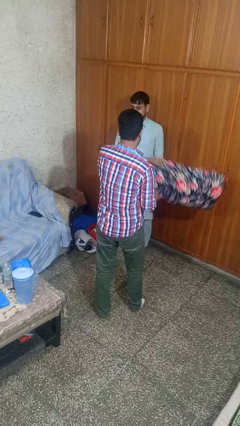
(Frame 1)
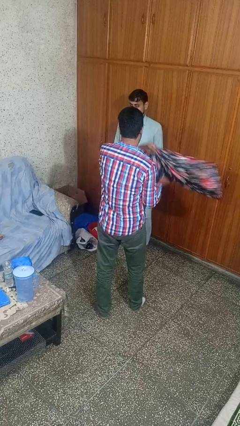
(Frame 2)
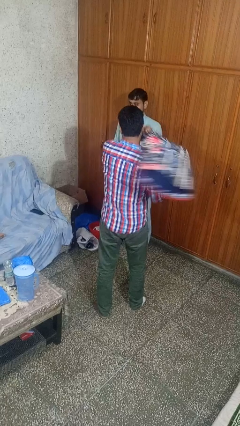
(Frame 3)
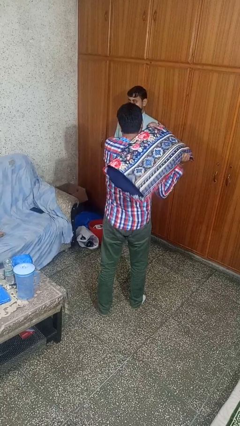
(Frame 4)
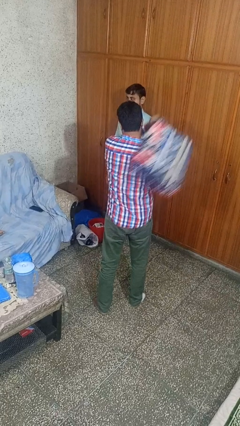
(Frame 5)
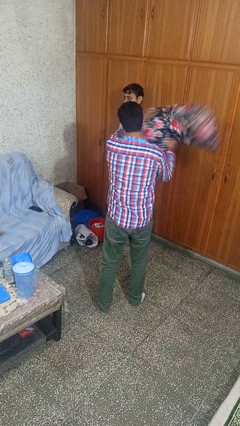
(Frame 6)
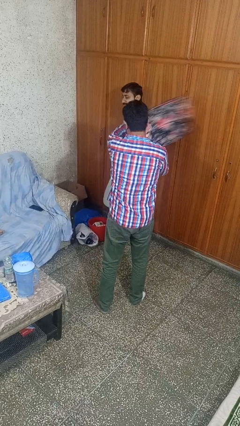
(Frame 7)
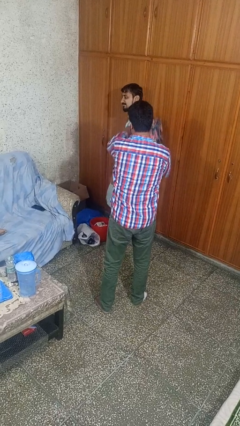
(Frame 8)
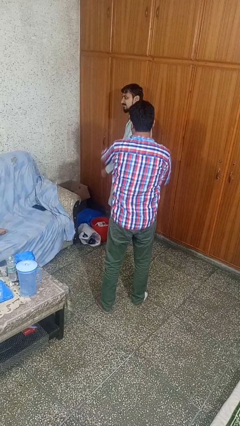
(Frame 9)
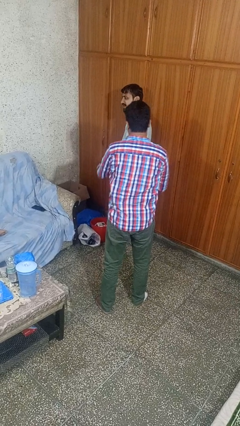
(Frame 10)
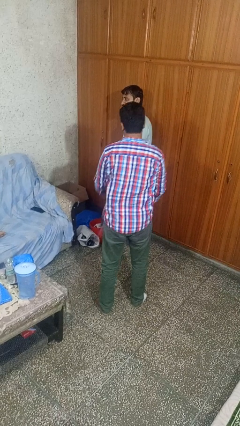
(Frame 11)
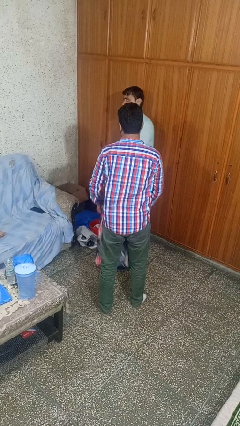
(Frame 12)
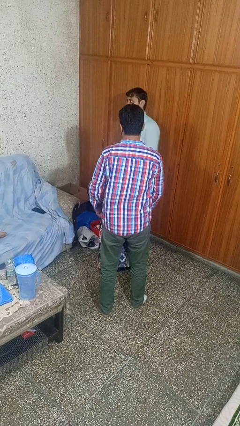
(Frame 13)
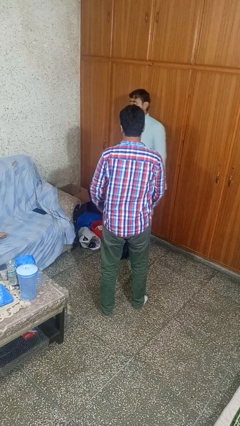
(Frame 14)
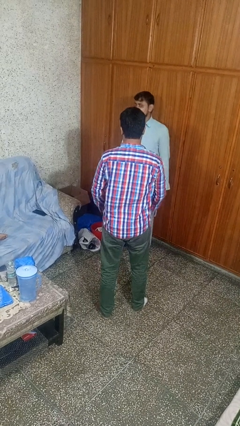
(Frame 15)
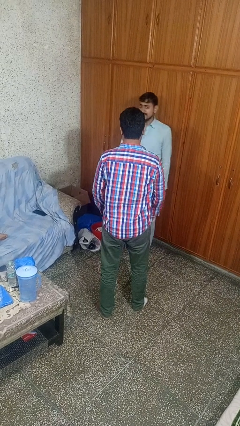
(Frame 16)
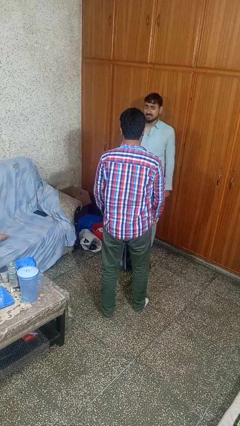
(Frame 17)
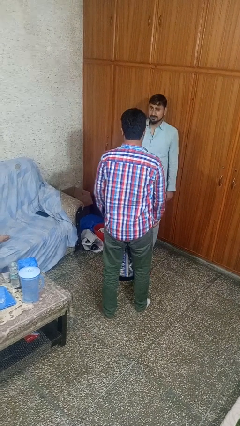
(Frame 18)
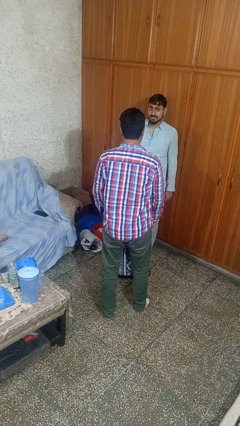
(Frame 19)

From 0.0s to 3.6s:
person hits person with pillow

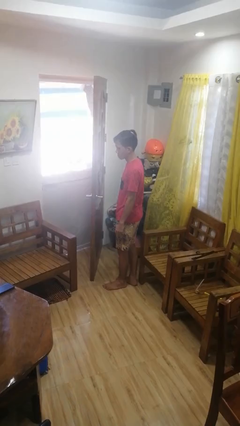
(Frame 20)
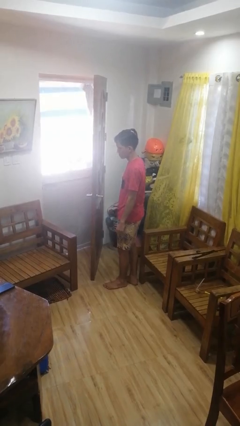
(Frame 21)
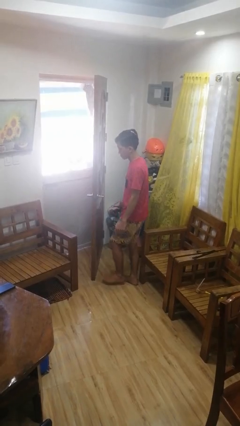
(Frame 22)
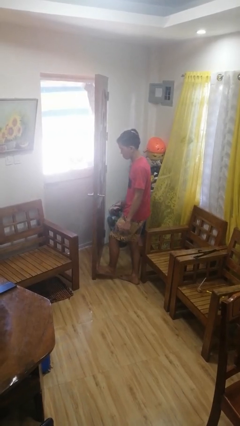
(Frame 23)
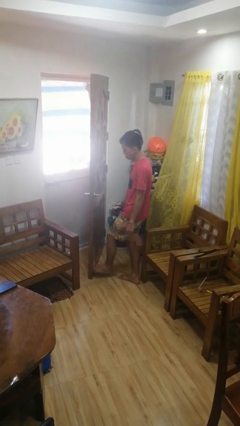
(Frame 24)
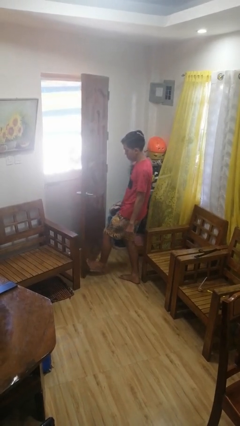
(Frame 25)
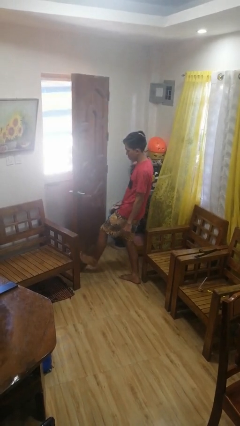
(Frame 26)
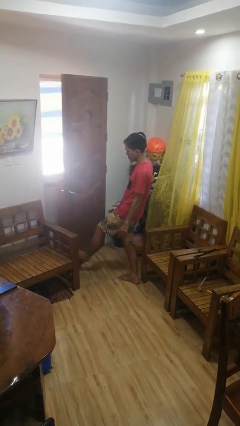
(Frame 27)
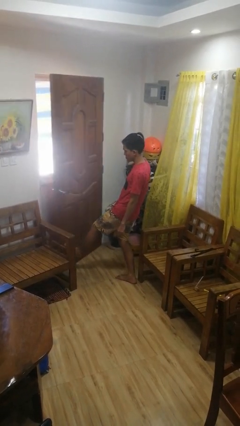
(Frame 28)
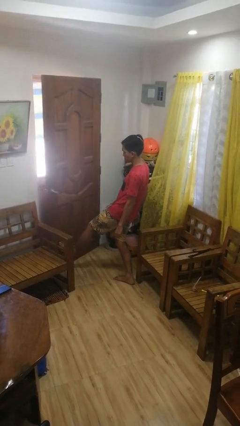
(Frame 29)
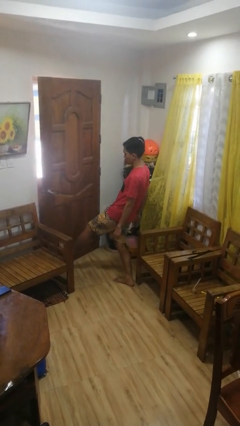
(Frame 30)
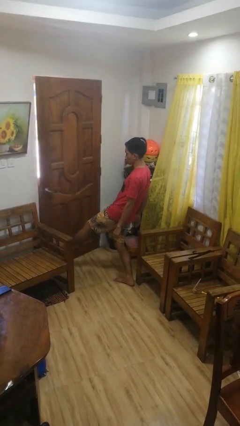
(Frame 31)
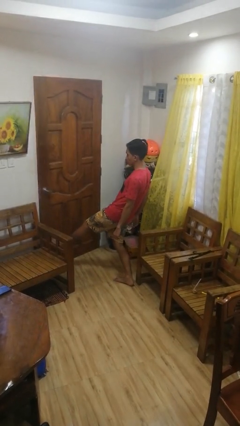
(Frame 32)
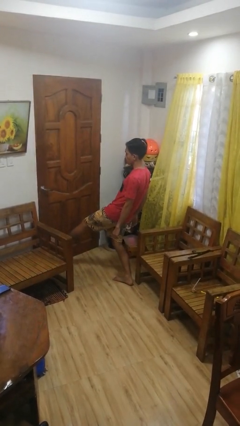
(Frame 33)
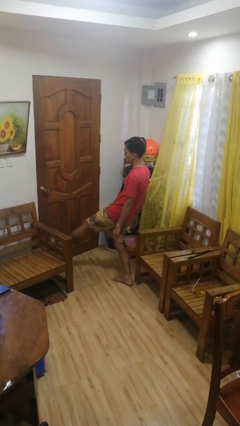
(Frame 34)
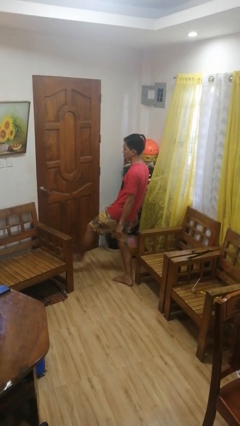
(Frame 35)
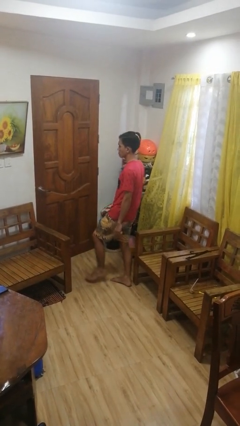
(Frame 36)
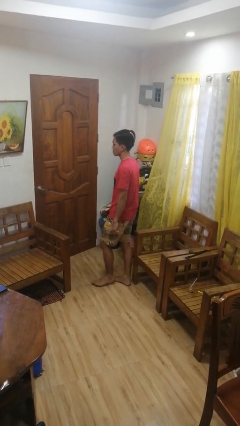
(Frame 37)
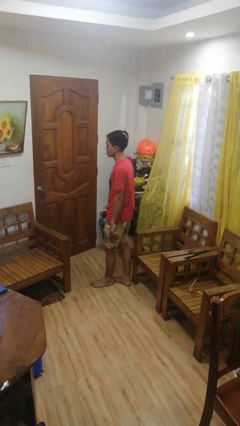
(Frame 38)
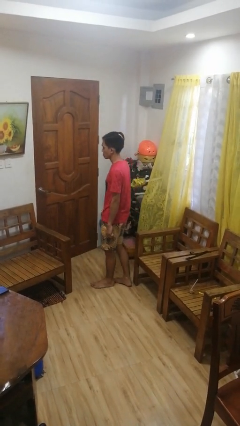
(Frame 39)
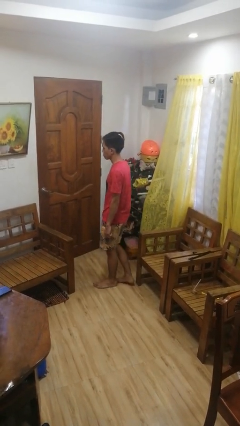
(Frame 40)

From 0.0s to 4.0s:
person closes door with foot

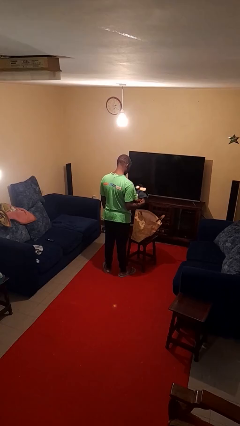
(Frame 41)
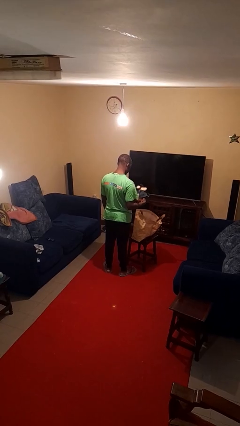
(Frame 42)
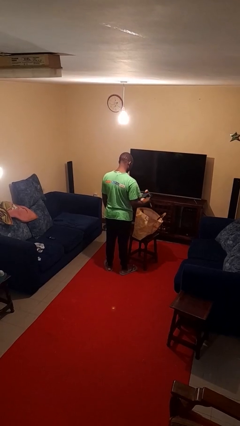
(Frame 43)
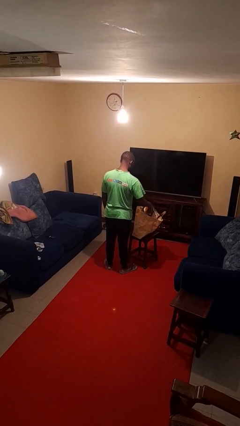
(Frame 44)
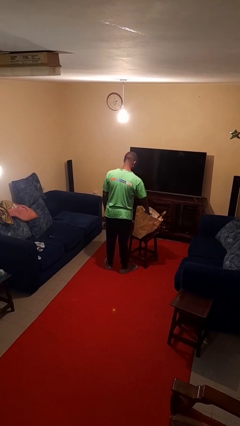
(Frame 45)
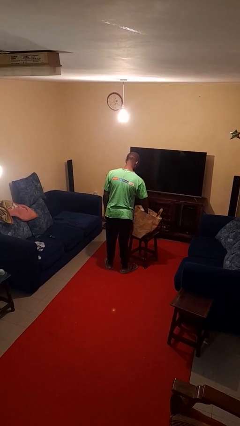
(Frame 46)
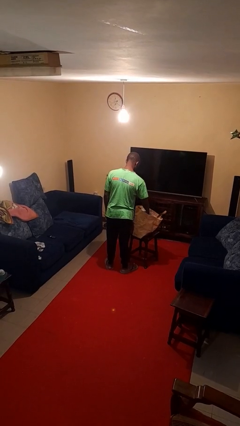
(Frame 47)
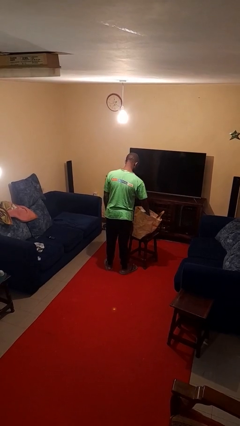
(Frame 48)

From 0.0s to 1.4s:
person puts object into bag

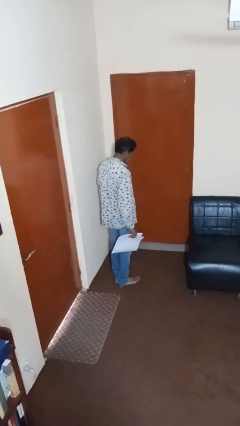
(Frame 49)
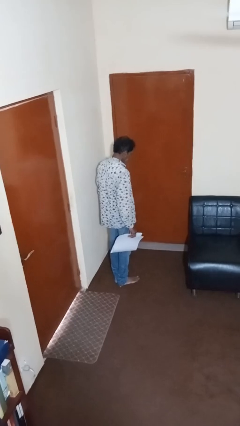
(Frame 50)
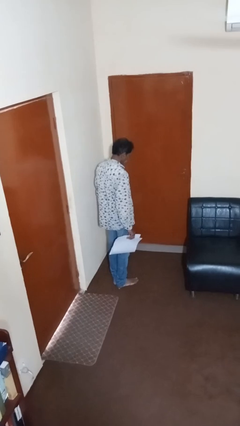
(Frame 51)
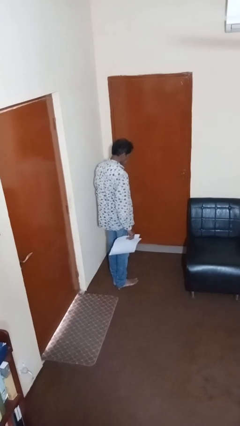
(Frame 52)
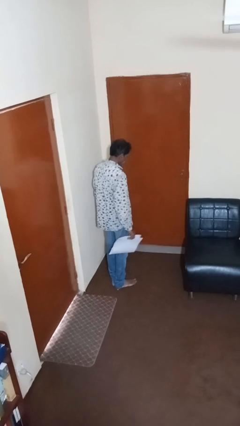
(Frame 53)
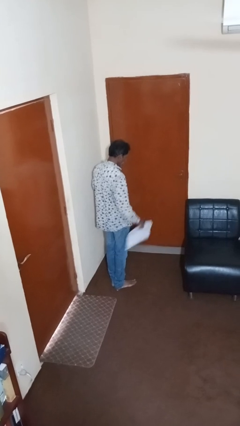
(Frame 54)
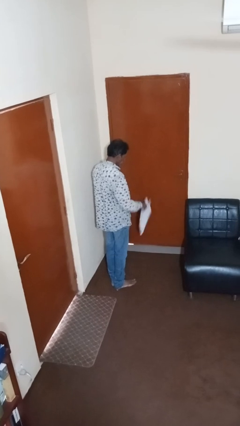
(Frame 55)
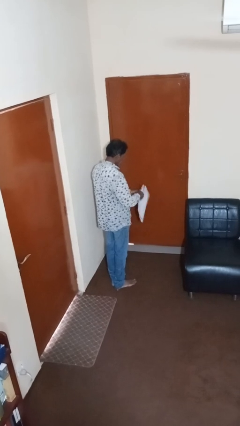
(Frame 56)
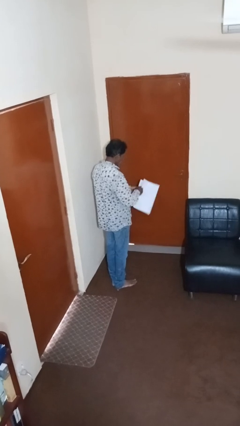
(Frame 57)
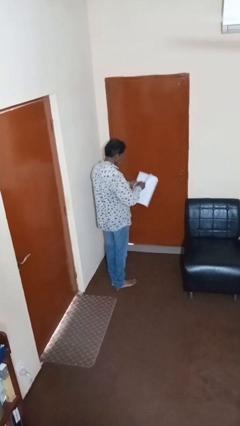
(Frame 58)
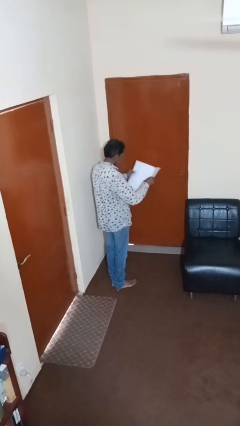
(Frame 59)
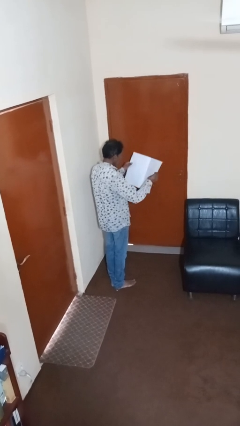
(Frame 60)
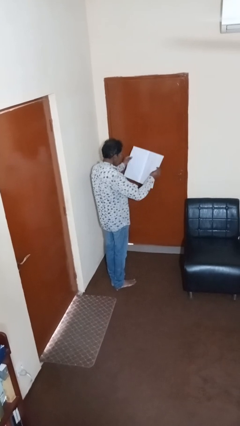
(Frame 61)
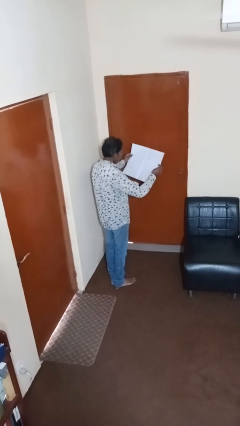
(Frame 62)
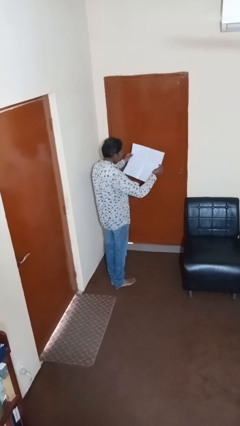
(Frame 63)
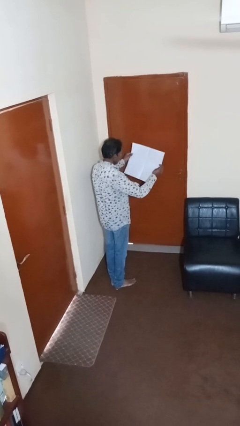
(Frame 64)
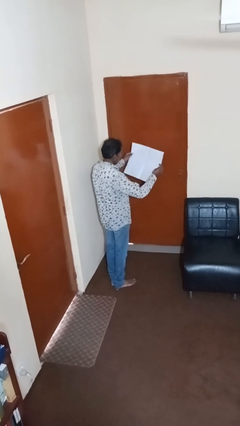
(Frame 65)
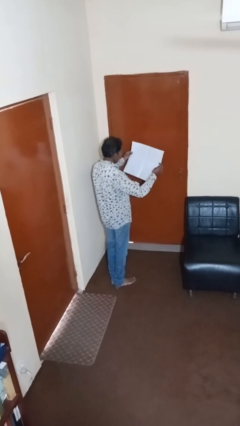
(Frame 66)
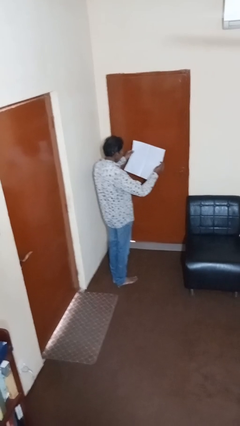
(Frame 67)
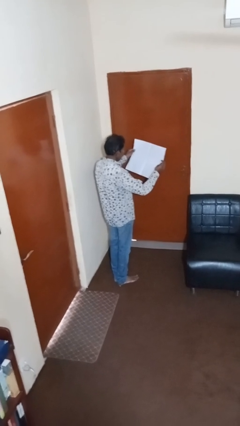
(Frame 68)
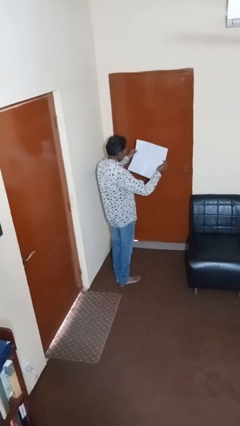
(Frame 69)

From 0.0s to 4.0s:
person reads newspaper

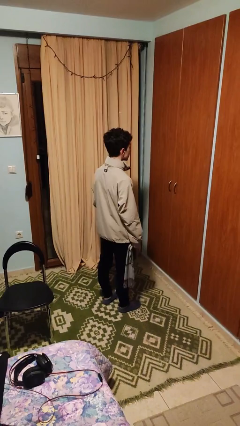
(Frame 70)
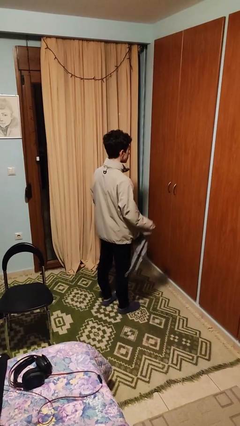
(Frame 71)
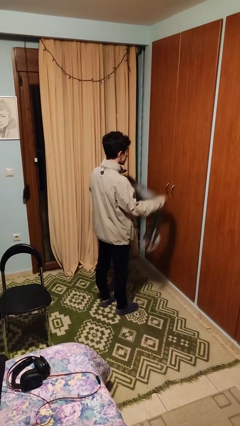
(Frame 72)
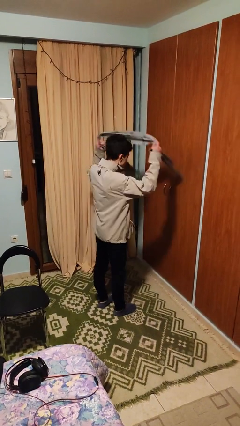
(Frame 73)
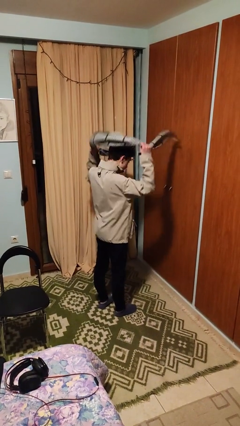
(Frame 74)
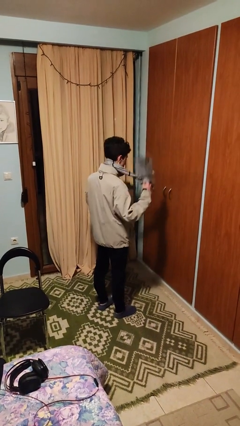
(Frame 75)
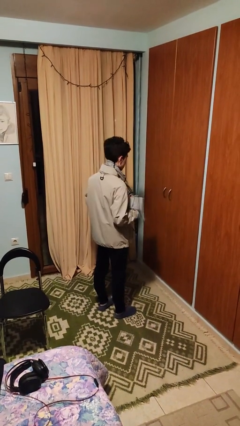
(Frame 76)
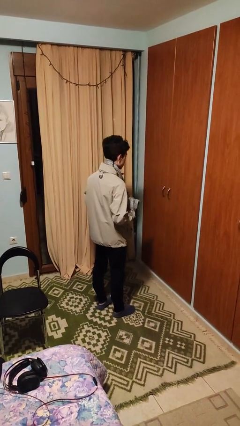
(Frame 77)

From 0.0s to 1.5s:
person puts on scarf

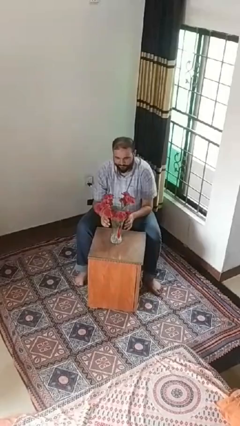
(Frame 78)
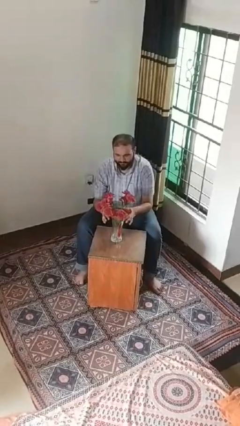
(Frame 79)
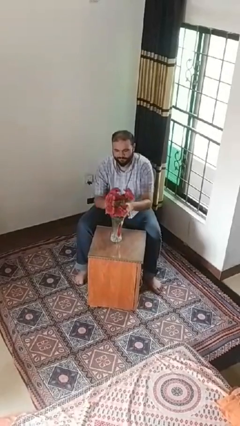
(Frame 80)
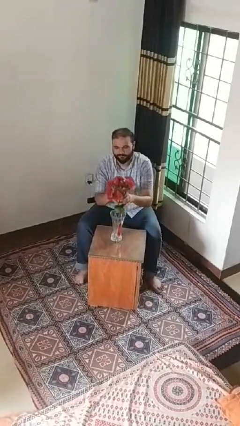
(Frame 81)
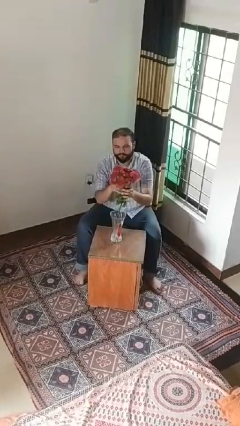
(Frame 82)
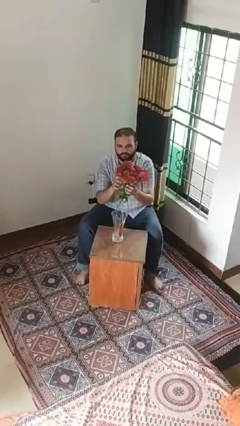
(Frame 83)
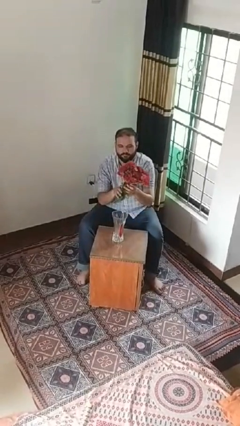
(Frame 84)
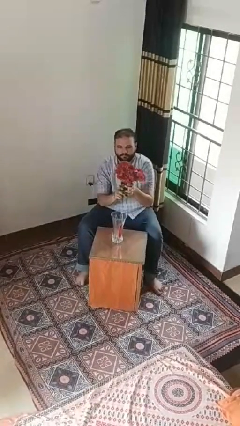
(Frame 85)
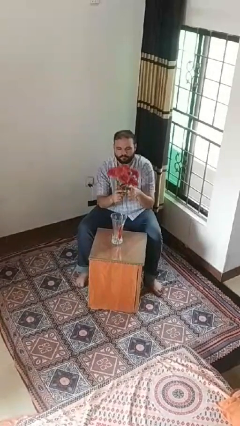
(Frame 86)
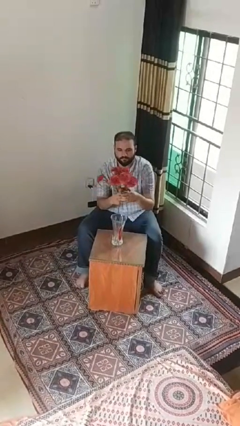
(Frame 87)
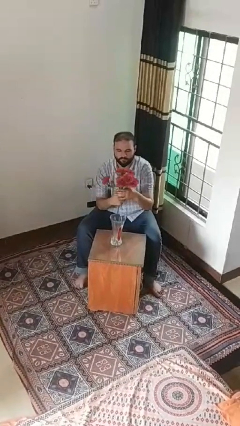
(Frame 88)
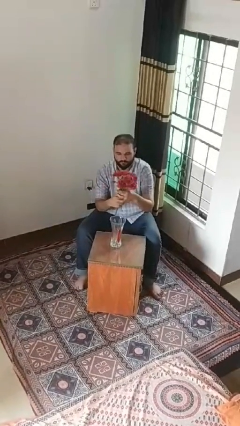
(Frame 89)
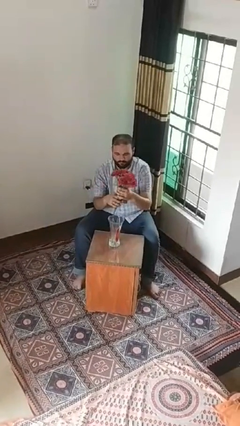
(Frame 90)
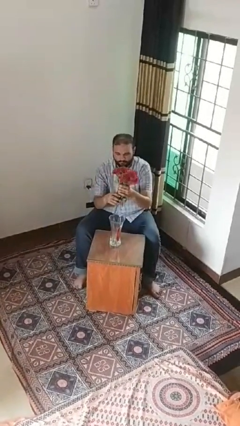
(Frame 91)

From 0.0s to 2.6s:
person arranges flowers in vase

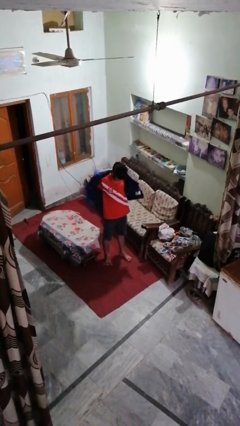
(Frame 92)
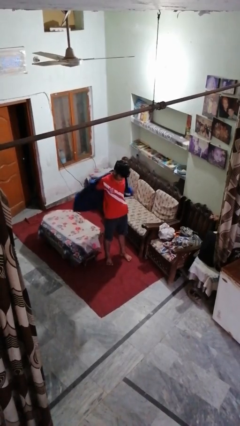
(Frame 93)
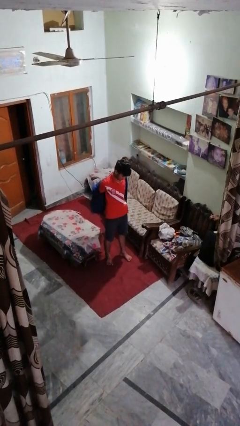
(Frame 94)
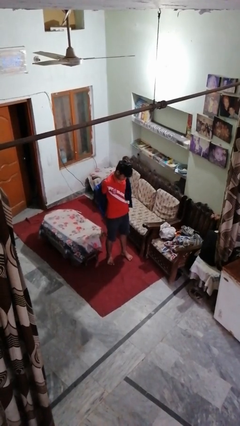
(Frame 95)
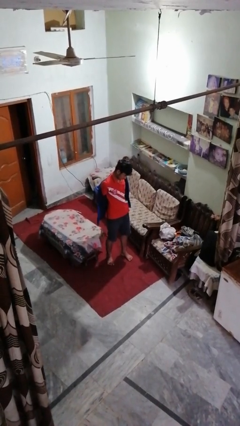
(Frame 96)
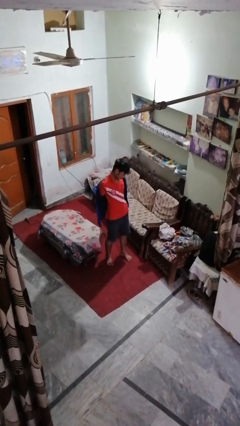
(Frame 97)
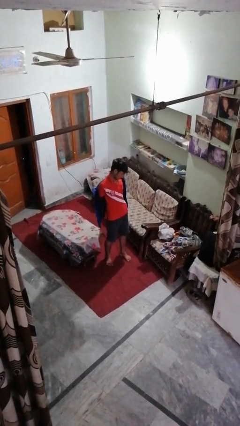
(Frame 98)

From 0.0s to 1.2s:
person takes off jacket
